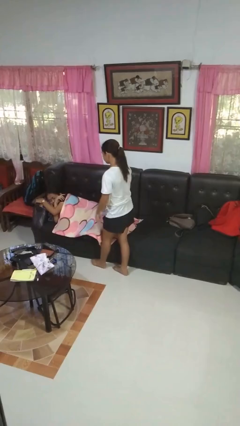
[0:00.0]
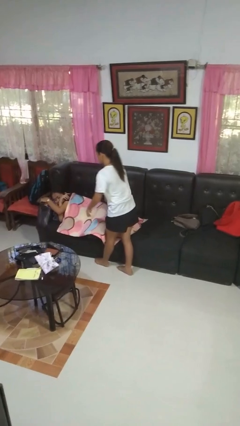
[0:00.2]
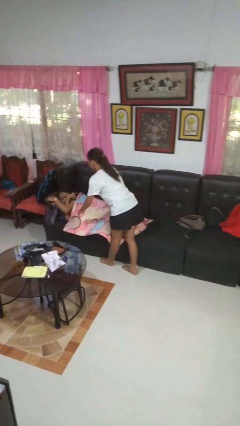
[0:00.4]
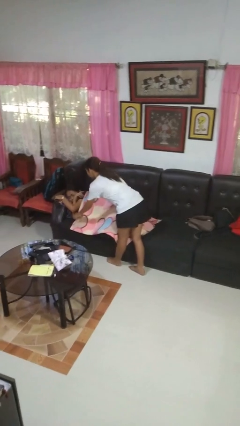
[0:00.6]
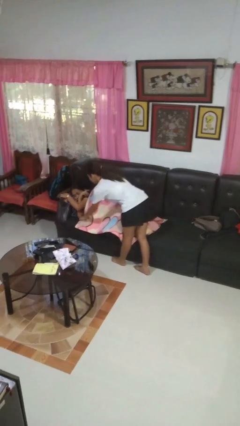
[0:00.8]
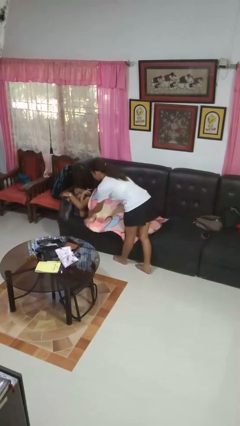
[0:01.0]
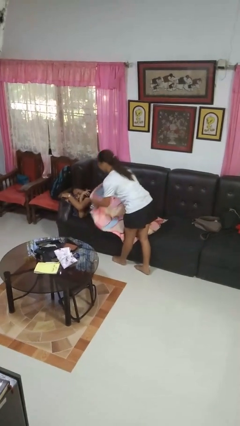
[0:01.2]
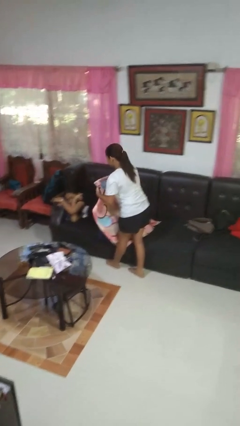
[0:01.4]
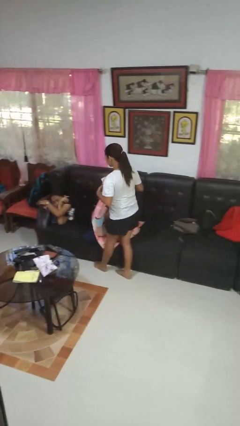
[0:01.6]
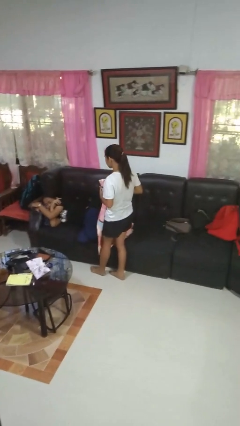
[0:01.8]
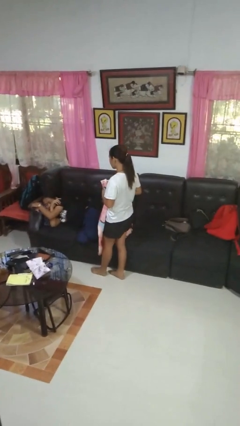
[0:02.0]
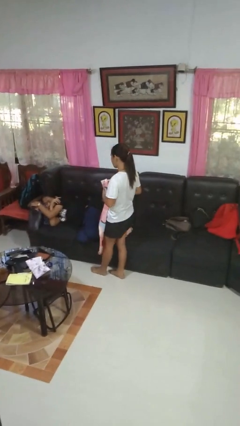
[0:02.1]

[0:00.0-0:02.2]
person uncovers friend with blanket

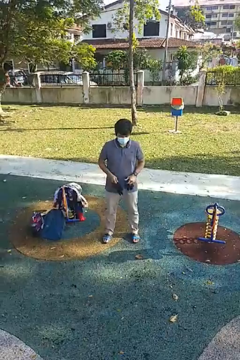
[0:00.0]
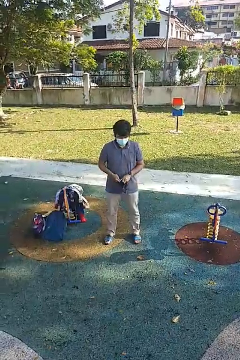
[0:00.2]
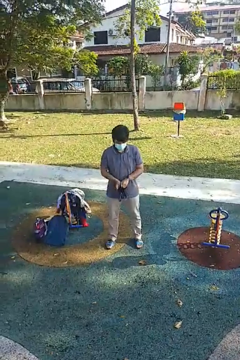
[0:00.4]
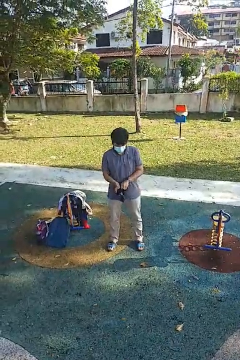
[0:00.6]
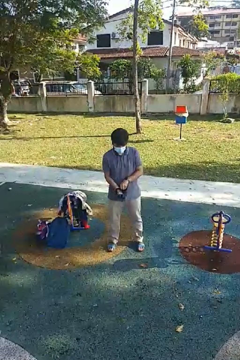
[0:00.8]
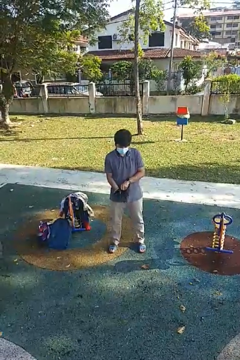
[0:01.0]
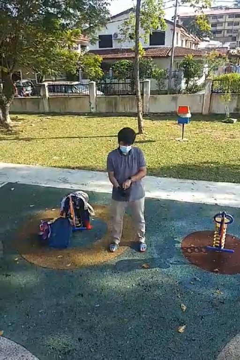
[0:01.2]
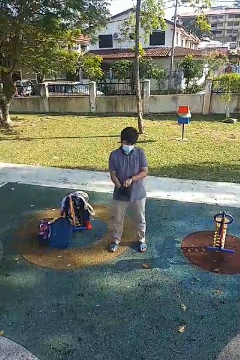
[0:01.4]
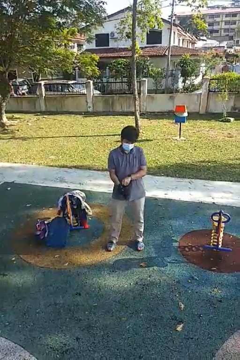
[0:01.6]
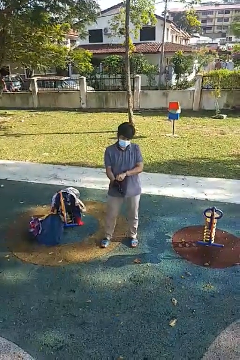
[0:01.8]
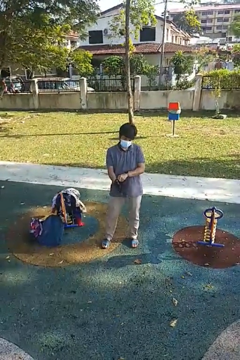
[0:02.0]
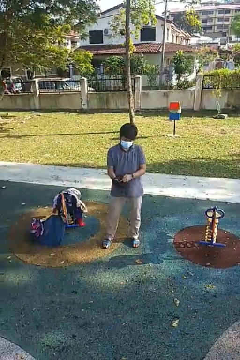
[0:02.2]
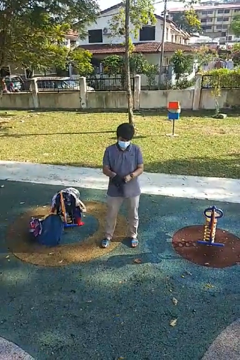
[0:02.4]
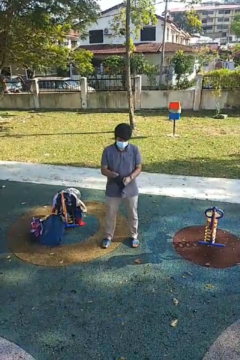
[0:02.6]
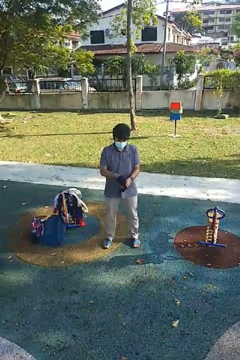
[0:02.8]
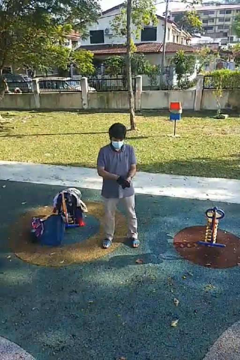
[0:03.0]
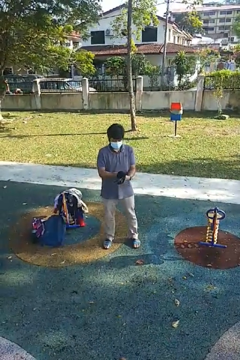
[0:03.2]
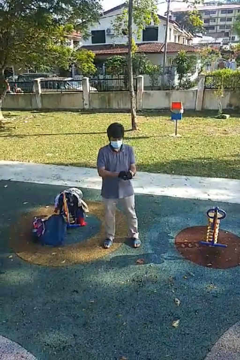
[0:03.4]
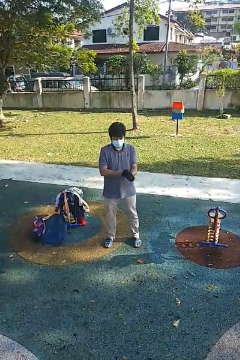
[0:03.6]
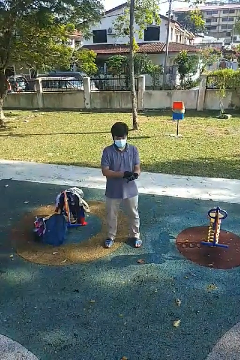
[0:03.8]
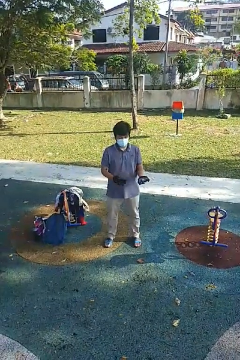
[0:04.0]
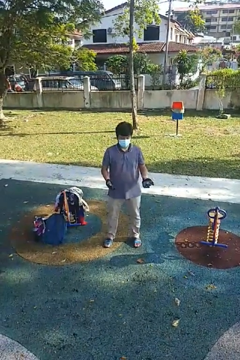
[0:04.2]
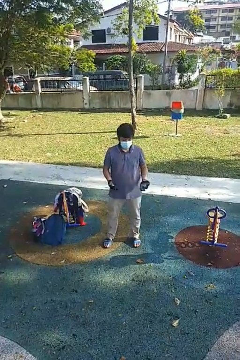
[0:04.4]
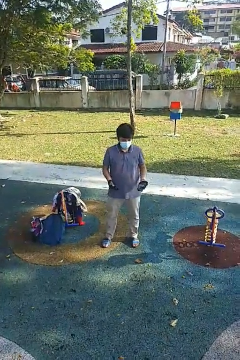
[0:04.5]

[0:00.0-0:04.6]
person puts on gloves

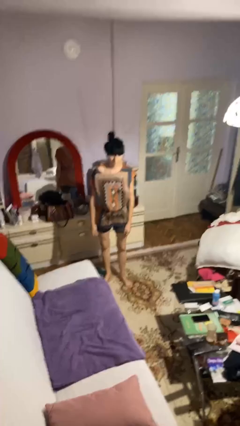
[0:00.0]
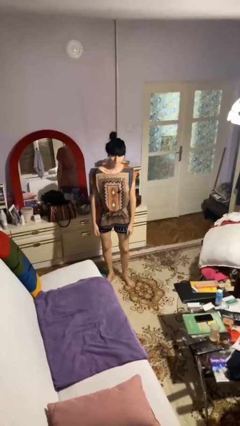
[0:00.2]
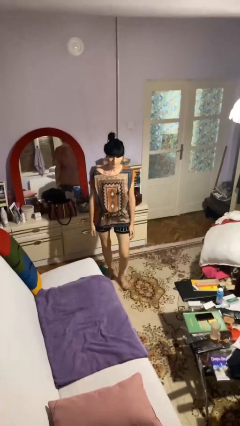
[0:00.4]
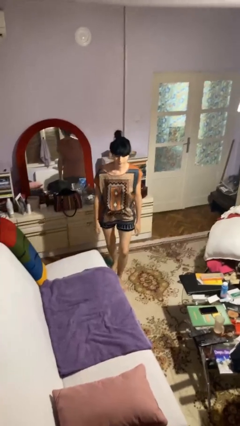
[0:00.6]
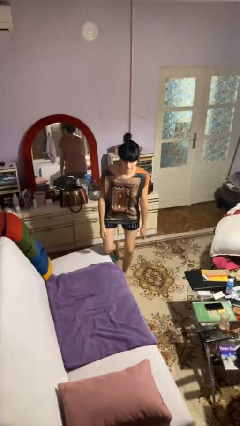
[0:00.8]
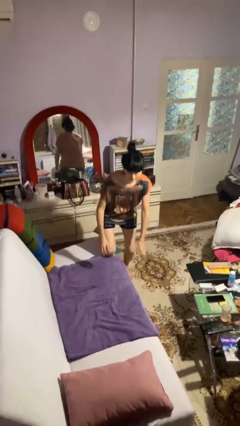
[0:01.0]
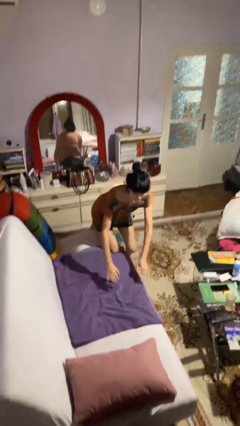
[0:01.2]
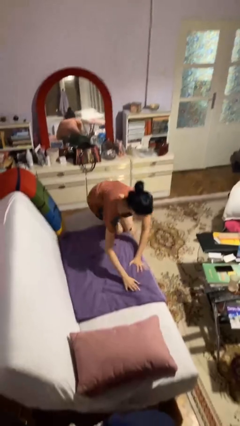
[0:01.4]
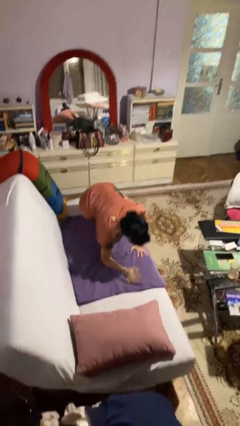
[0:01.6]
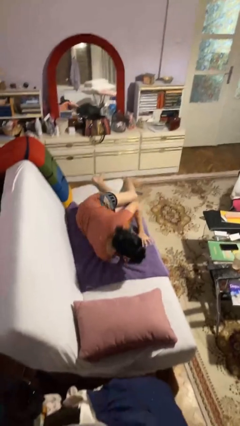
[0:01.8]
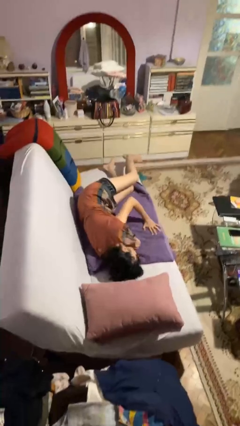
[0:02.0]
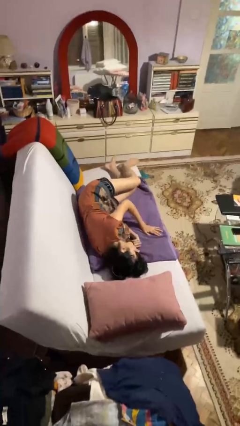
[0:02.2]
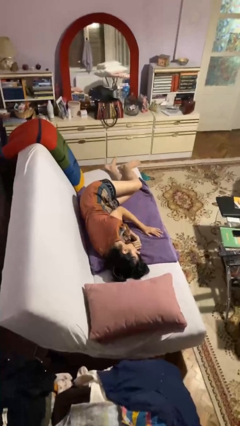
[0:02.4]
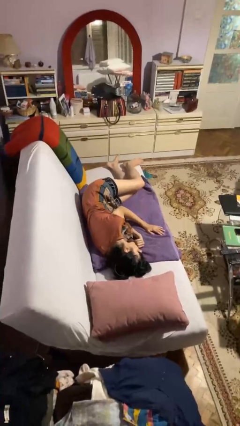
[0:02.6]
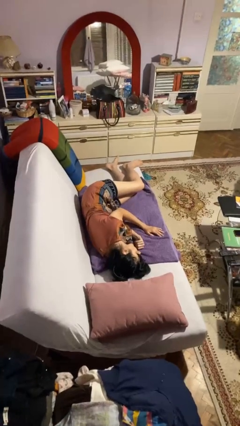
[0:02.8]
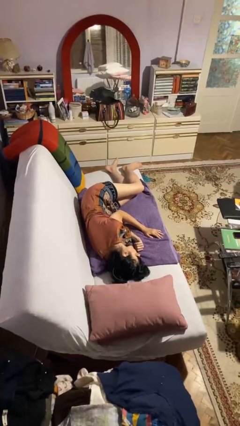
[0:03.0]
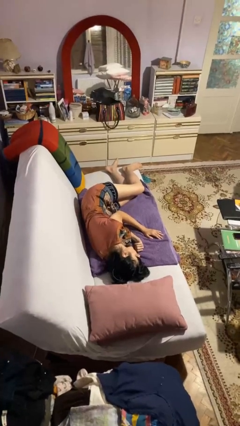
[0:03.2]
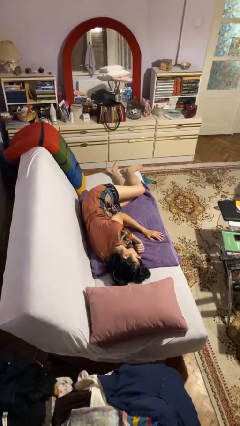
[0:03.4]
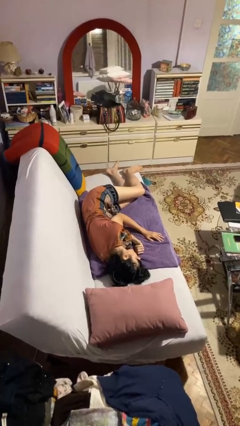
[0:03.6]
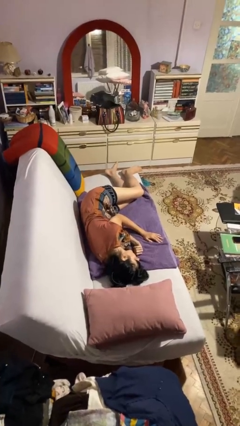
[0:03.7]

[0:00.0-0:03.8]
person lies down on couch

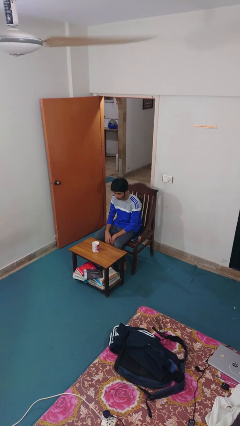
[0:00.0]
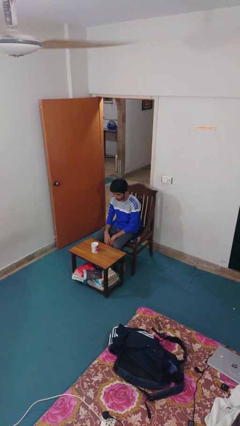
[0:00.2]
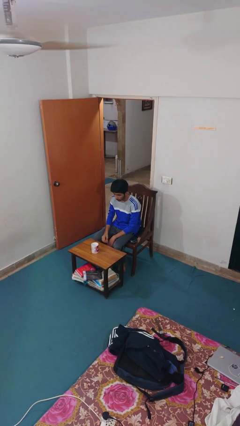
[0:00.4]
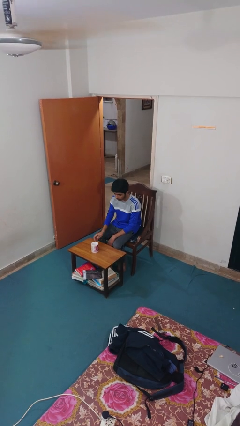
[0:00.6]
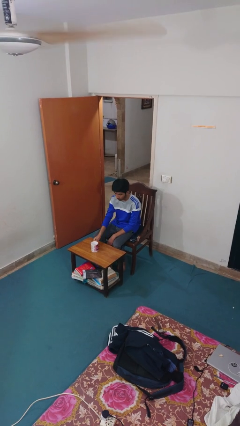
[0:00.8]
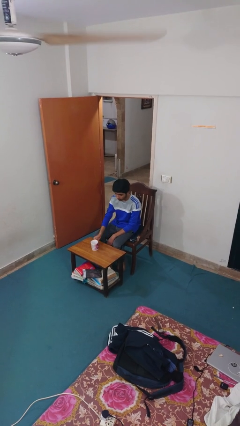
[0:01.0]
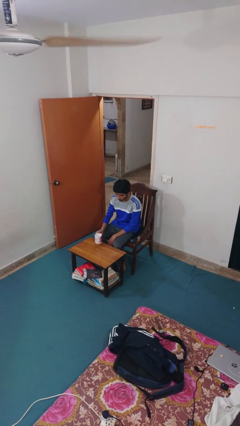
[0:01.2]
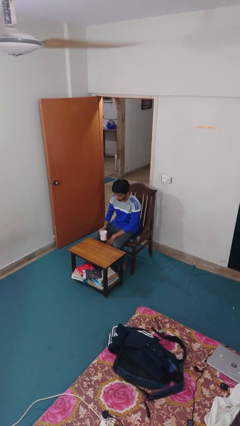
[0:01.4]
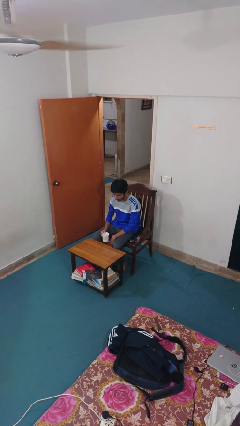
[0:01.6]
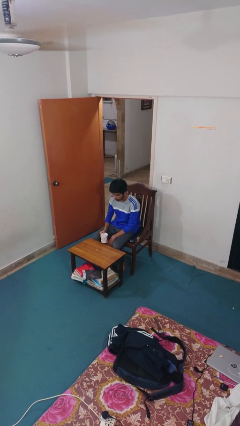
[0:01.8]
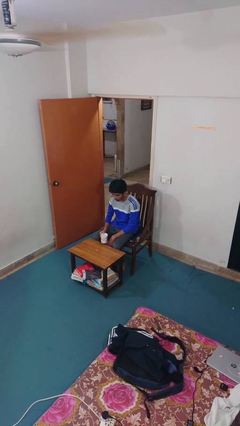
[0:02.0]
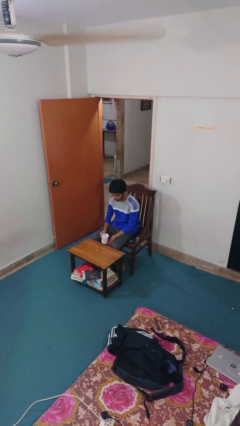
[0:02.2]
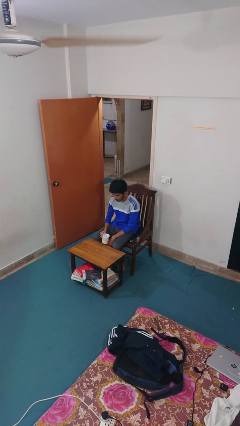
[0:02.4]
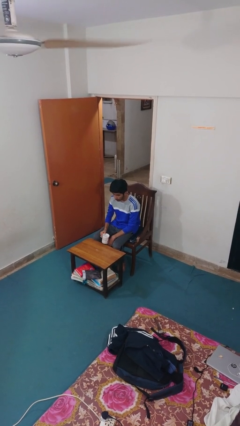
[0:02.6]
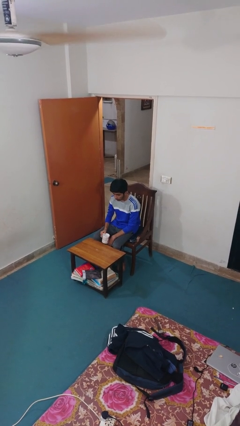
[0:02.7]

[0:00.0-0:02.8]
person picks up object from table

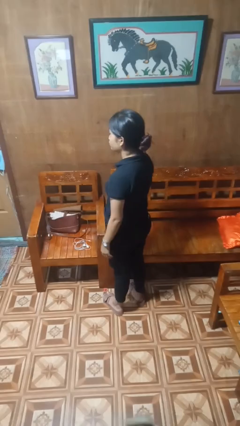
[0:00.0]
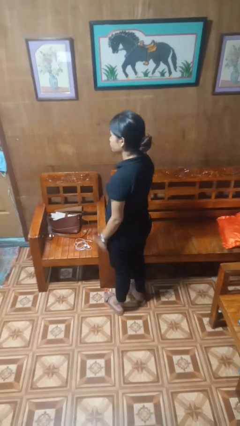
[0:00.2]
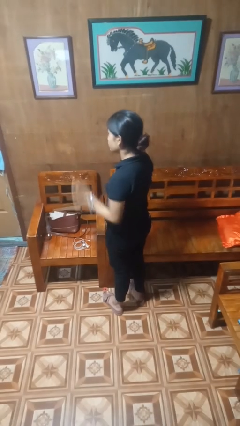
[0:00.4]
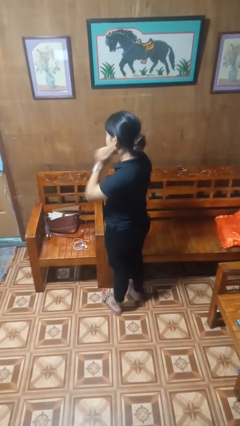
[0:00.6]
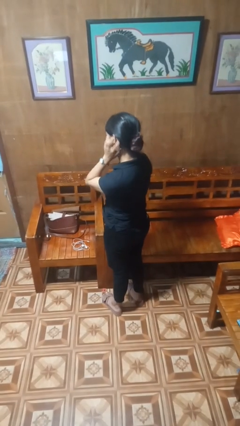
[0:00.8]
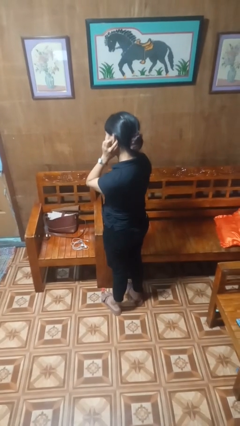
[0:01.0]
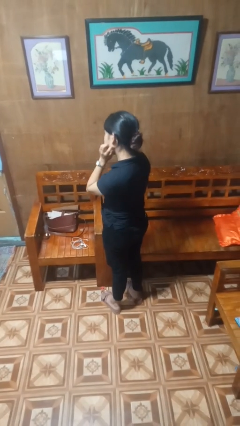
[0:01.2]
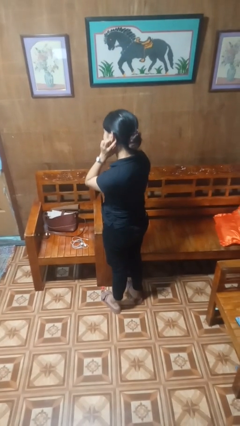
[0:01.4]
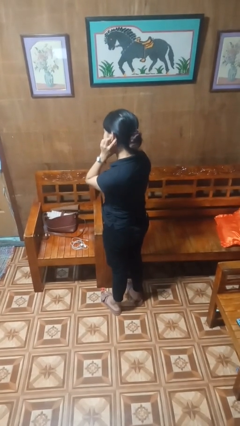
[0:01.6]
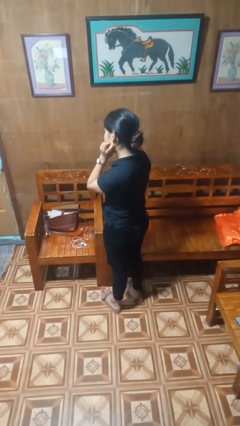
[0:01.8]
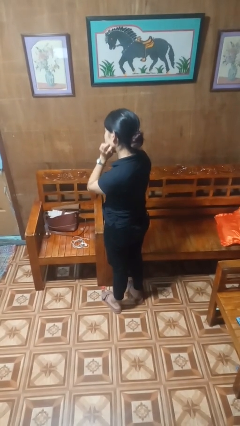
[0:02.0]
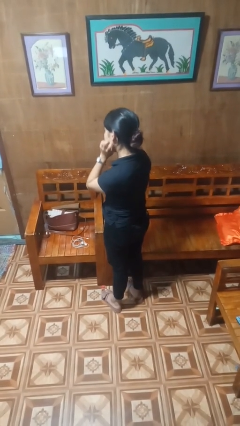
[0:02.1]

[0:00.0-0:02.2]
person scratches face

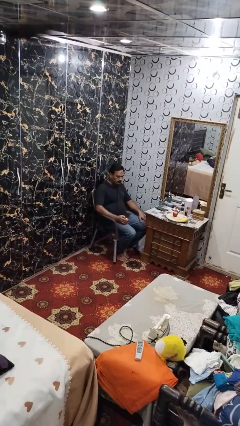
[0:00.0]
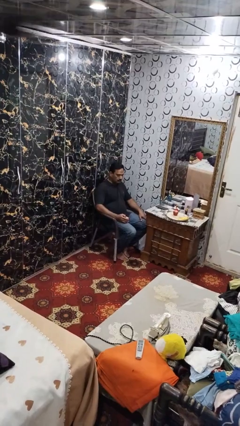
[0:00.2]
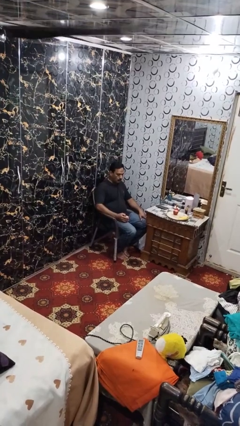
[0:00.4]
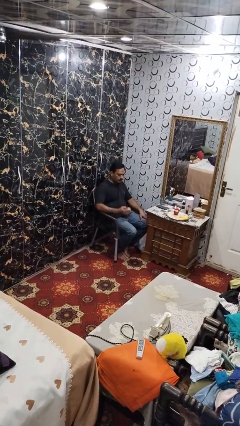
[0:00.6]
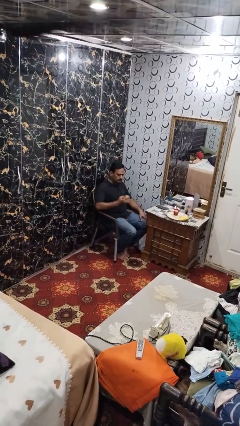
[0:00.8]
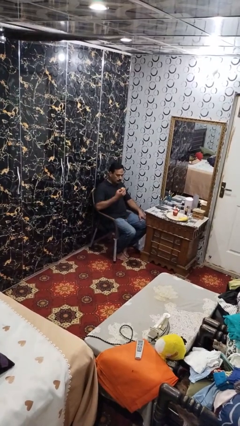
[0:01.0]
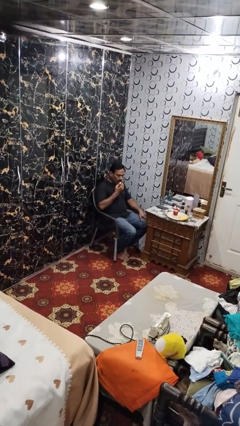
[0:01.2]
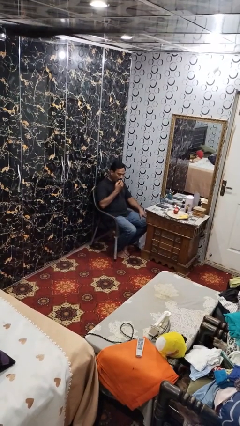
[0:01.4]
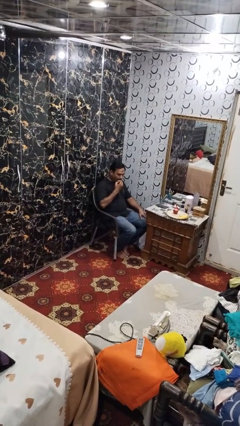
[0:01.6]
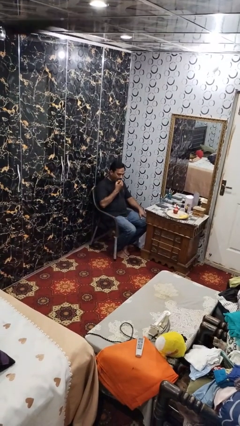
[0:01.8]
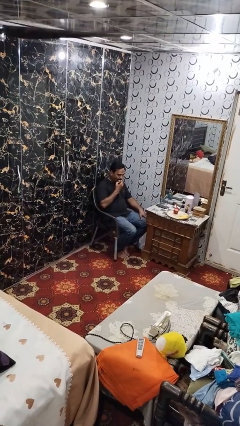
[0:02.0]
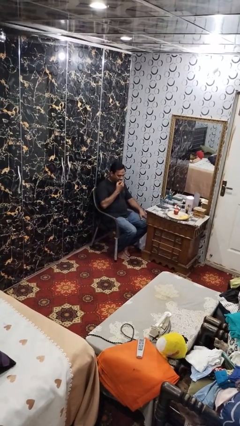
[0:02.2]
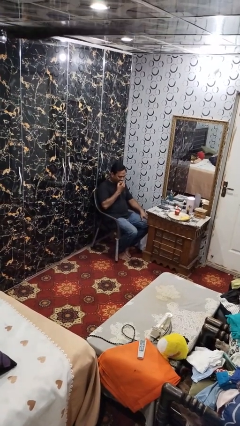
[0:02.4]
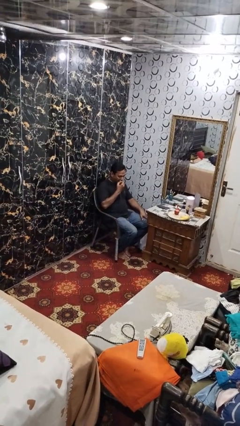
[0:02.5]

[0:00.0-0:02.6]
person eats apple
